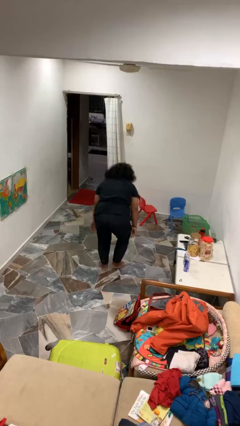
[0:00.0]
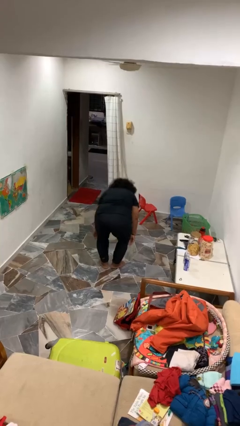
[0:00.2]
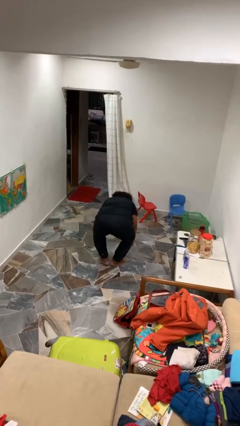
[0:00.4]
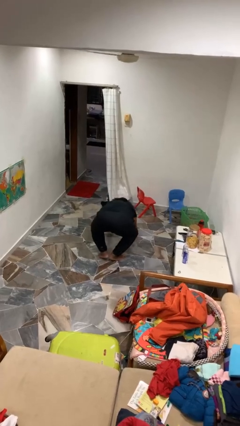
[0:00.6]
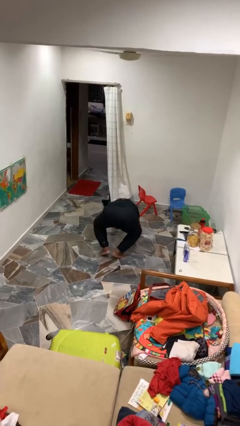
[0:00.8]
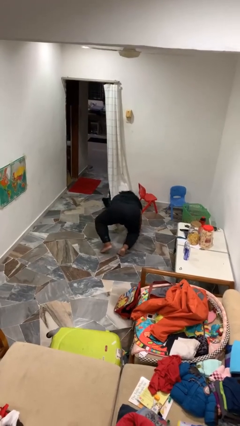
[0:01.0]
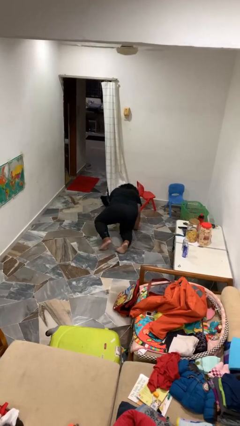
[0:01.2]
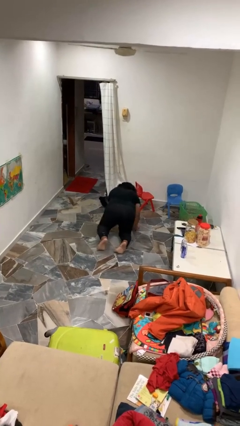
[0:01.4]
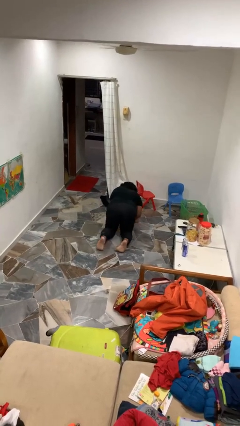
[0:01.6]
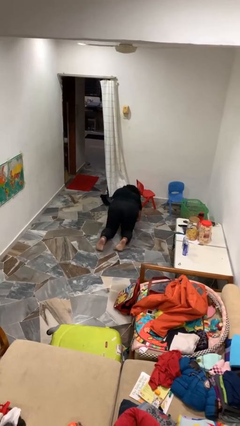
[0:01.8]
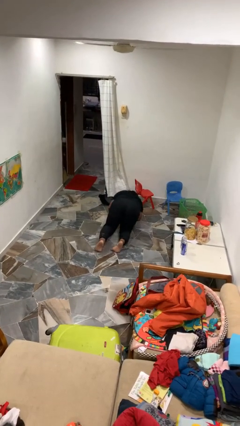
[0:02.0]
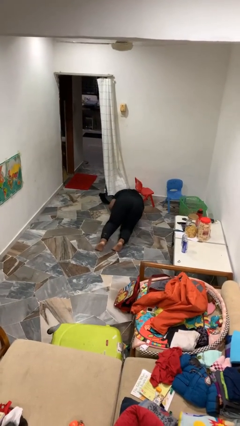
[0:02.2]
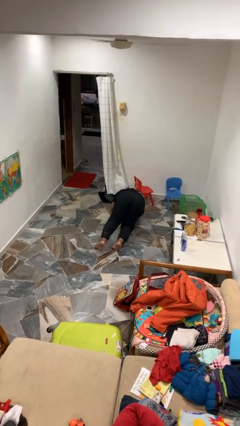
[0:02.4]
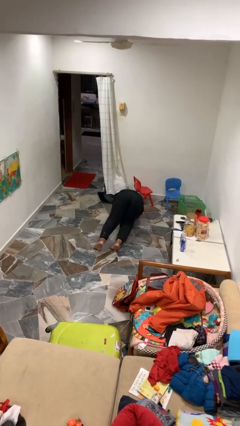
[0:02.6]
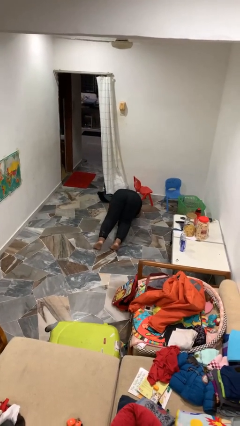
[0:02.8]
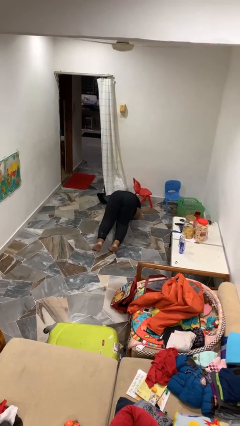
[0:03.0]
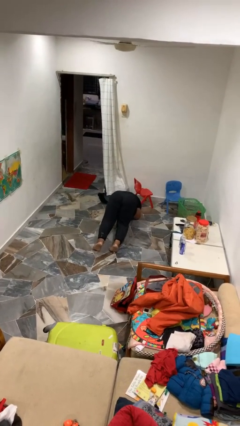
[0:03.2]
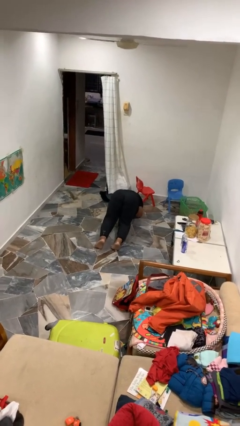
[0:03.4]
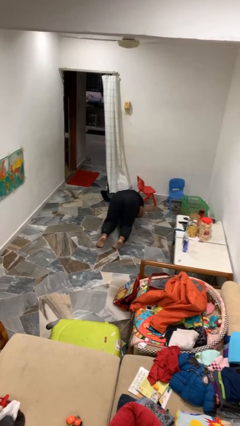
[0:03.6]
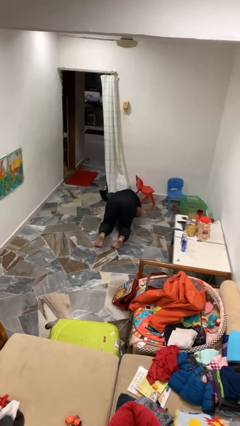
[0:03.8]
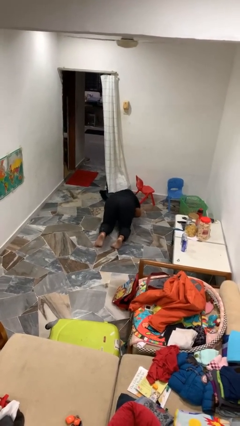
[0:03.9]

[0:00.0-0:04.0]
person exercises with plank

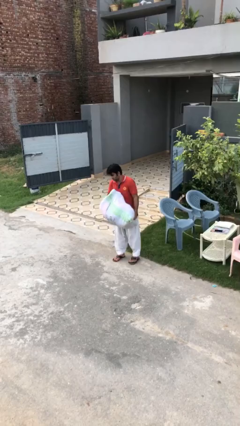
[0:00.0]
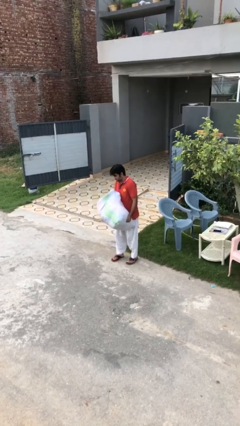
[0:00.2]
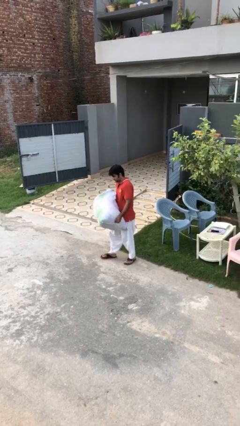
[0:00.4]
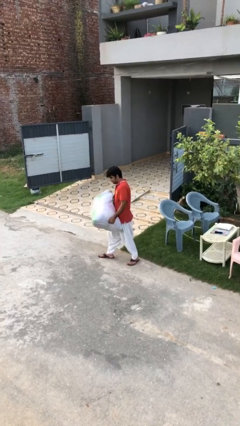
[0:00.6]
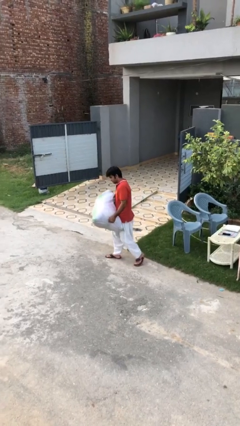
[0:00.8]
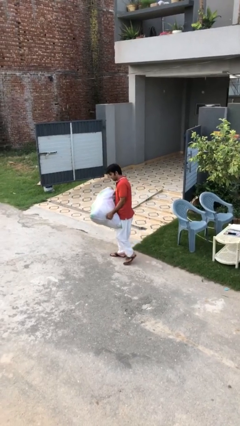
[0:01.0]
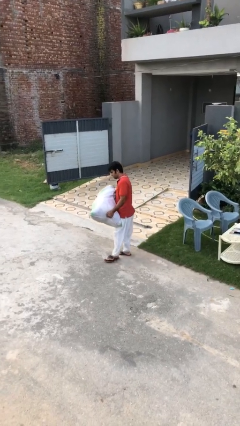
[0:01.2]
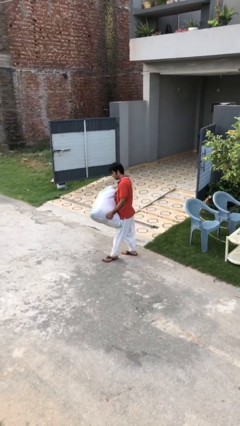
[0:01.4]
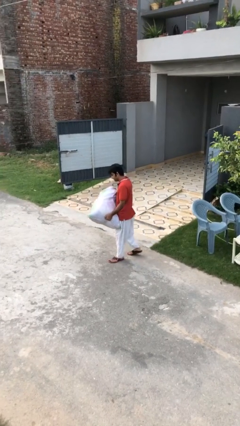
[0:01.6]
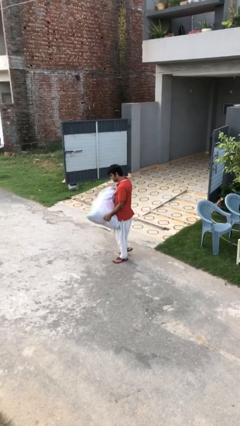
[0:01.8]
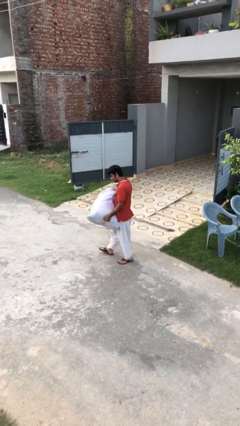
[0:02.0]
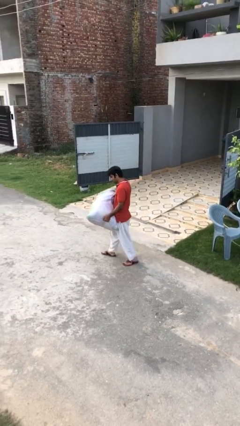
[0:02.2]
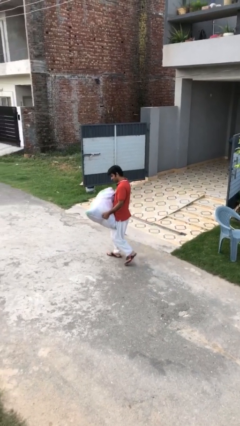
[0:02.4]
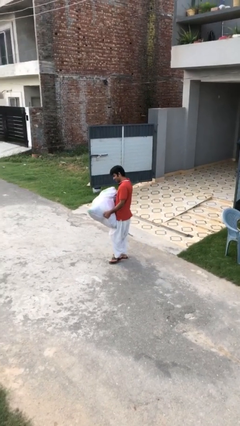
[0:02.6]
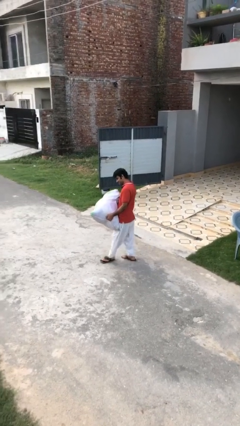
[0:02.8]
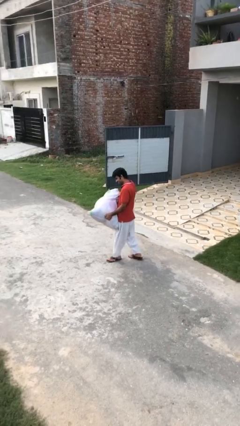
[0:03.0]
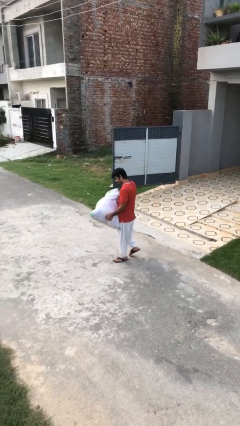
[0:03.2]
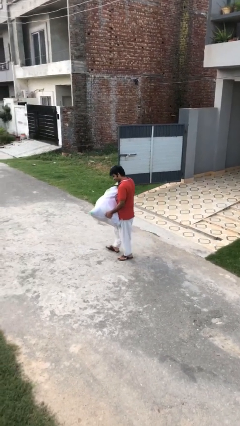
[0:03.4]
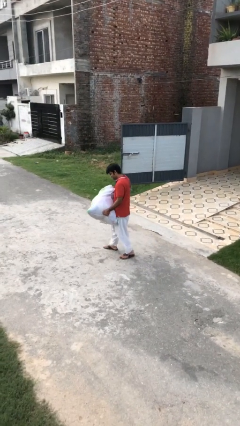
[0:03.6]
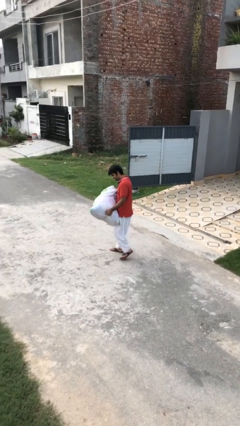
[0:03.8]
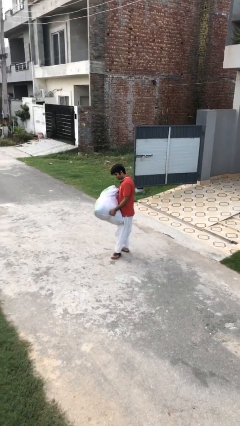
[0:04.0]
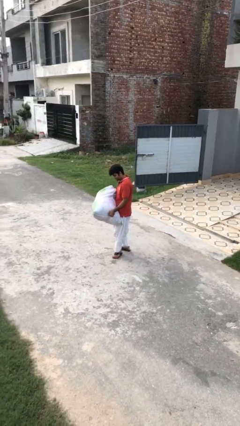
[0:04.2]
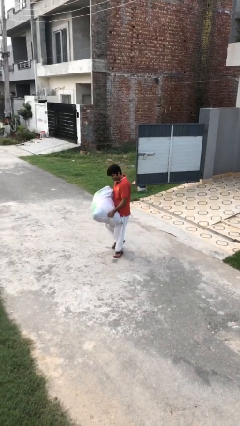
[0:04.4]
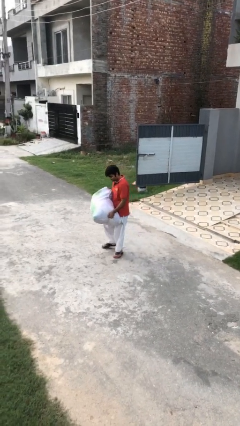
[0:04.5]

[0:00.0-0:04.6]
person carries heavy object

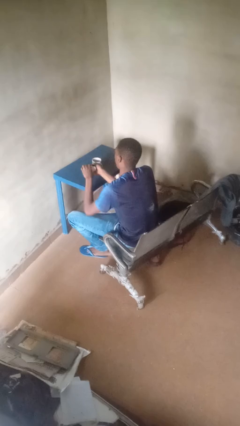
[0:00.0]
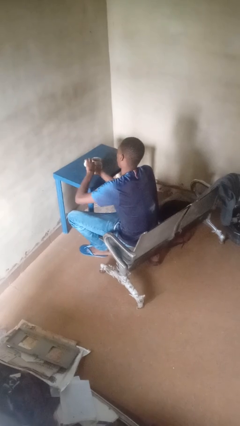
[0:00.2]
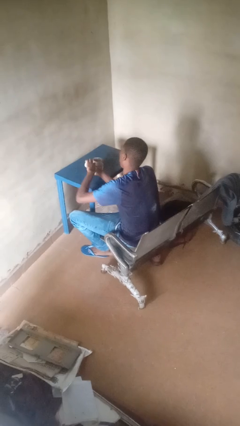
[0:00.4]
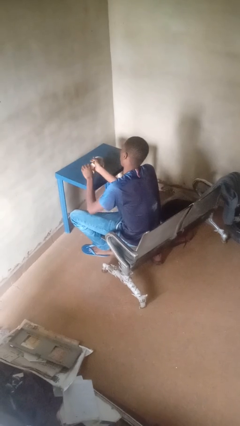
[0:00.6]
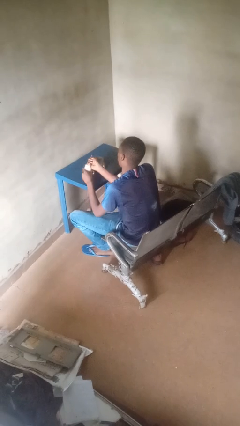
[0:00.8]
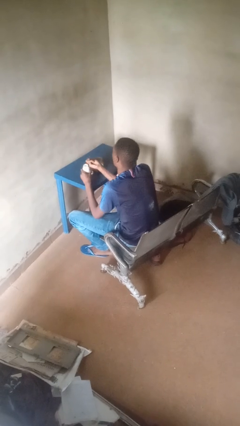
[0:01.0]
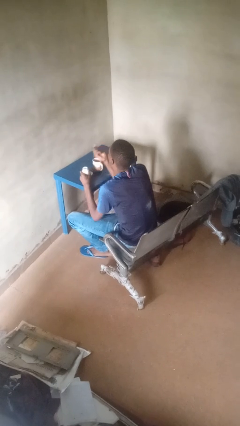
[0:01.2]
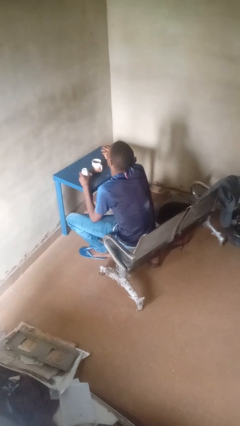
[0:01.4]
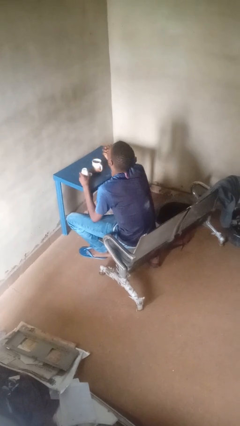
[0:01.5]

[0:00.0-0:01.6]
person takes medicine pills

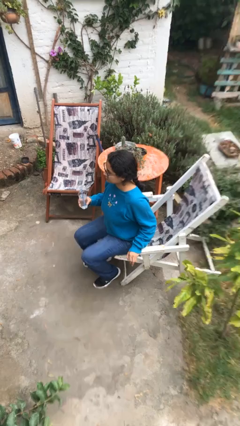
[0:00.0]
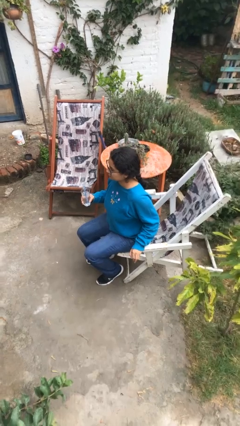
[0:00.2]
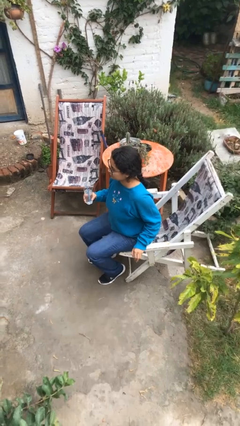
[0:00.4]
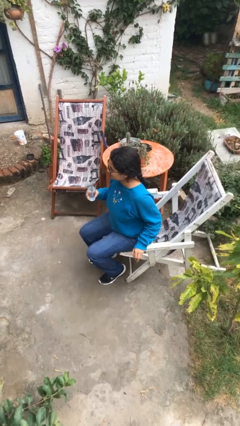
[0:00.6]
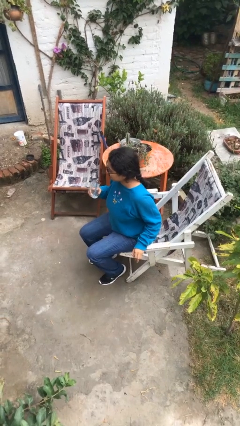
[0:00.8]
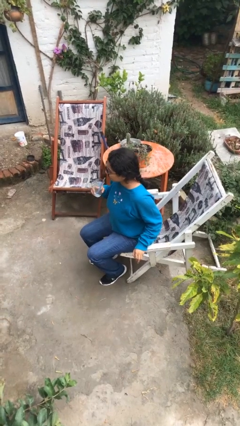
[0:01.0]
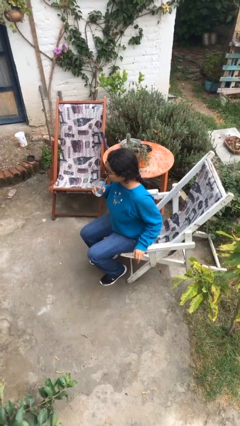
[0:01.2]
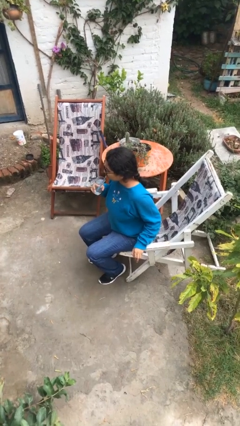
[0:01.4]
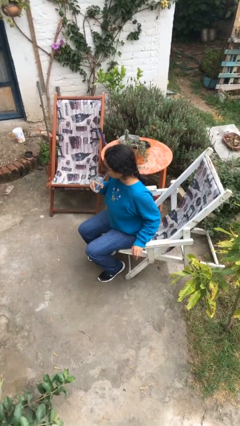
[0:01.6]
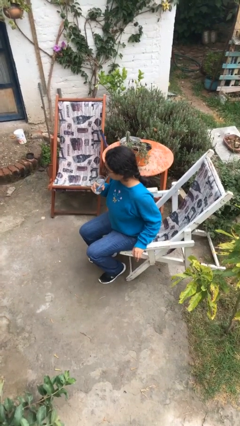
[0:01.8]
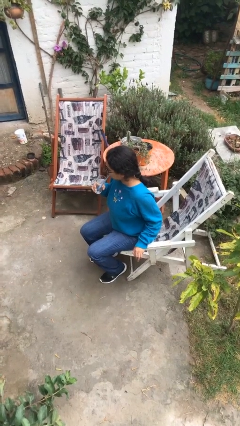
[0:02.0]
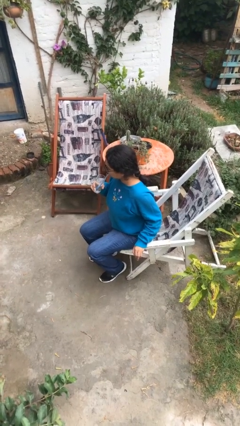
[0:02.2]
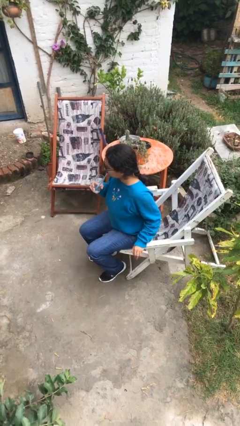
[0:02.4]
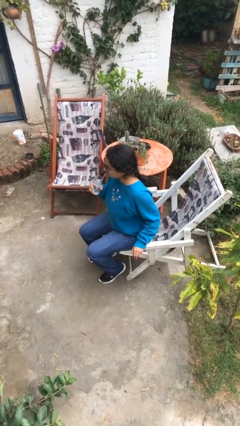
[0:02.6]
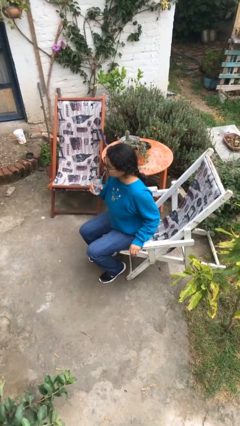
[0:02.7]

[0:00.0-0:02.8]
person drinks from straw

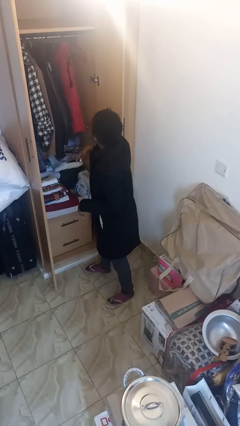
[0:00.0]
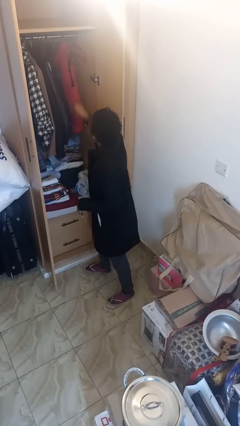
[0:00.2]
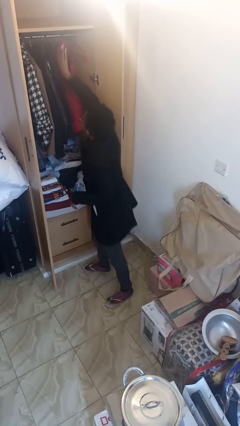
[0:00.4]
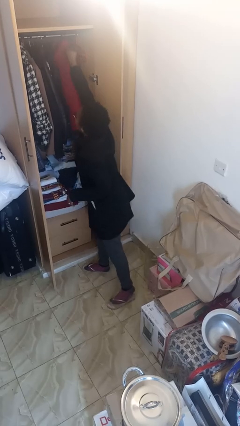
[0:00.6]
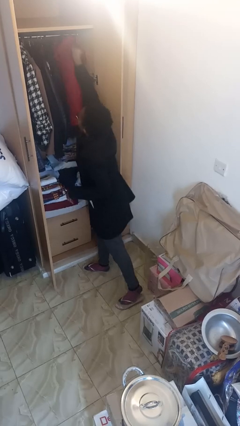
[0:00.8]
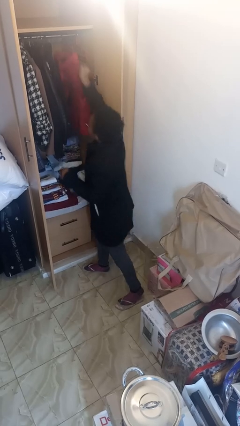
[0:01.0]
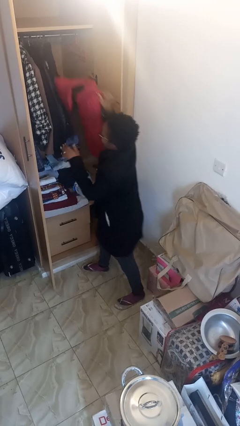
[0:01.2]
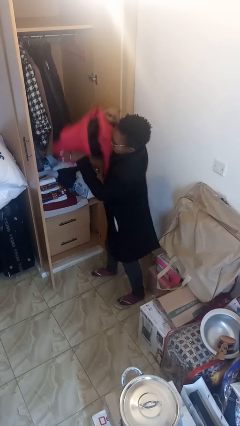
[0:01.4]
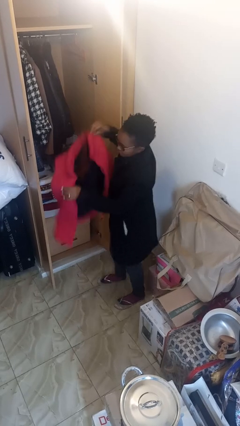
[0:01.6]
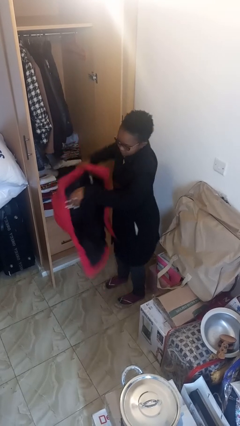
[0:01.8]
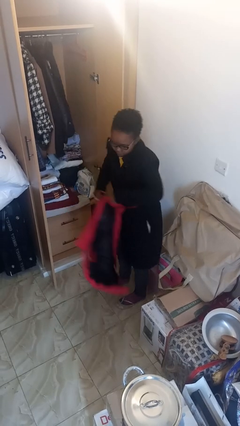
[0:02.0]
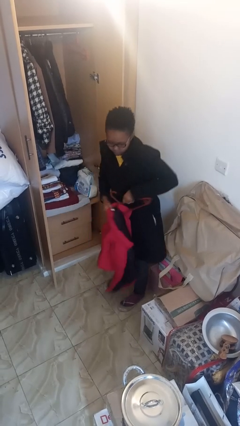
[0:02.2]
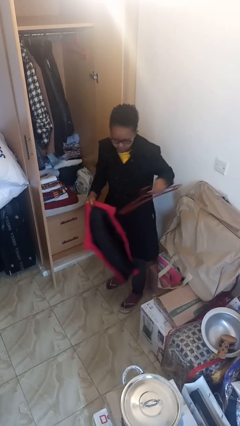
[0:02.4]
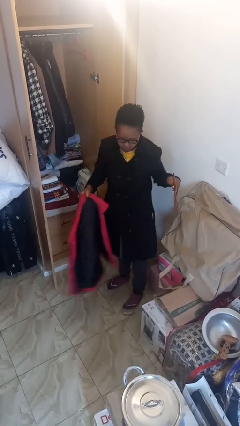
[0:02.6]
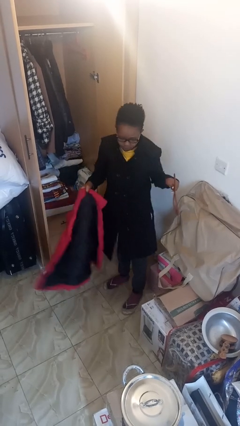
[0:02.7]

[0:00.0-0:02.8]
person takes clothes from closet

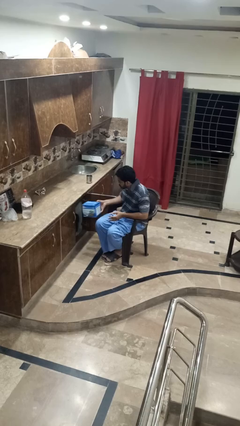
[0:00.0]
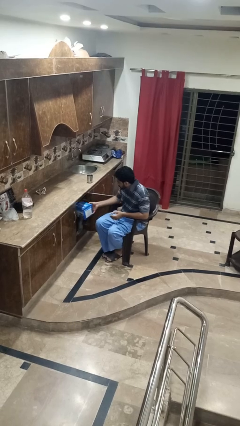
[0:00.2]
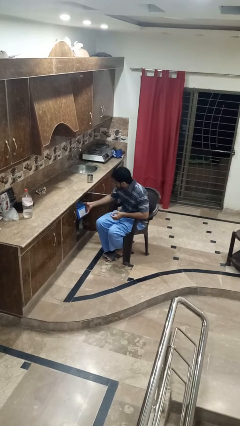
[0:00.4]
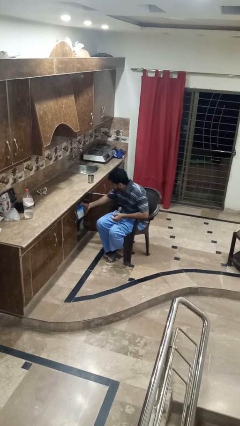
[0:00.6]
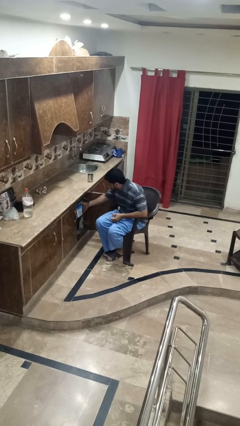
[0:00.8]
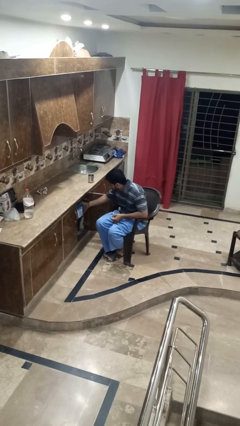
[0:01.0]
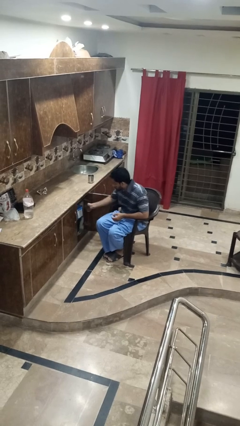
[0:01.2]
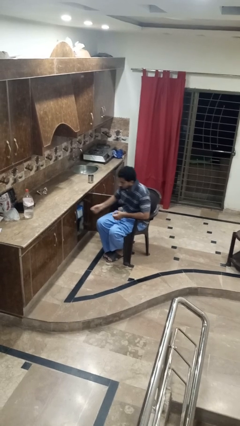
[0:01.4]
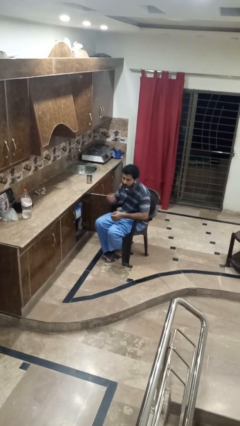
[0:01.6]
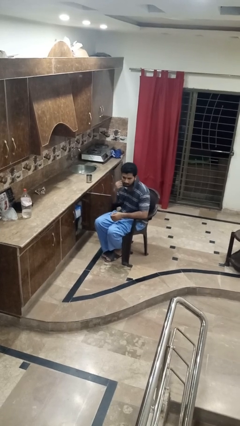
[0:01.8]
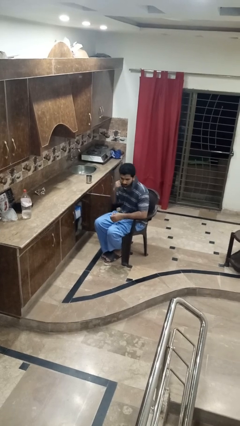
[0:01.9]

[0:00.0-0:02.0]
person puts down object into cabinet
